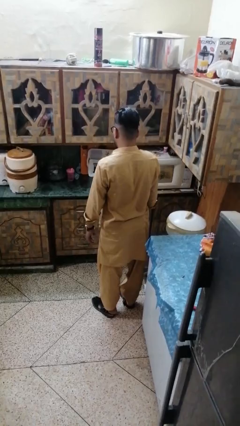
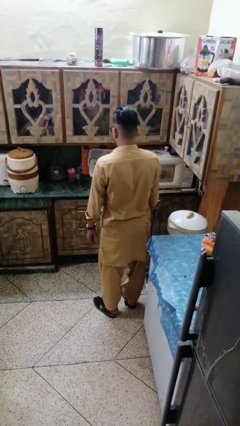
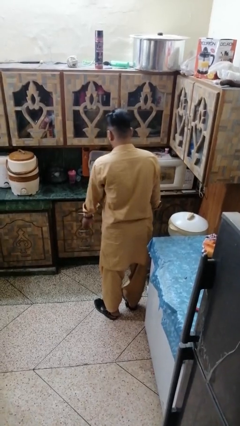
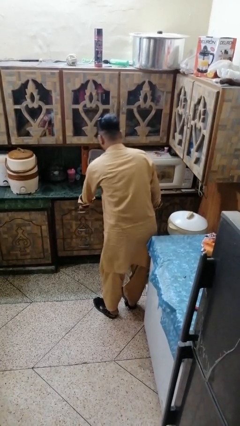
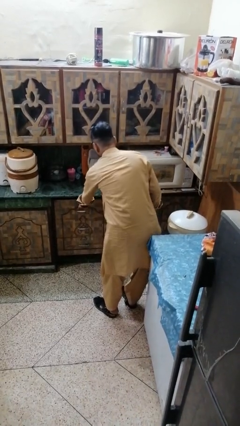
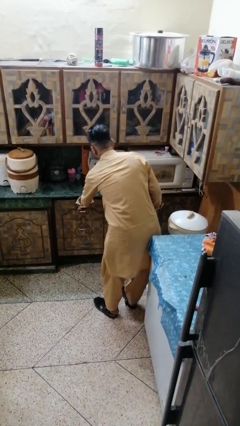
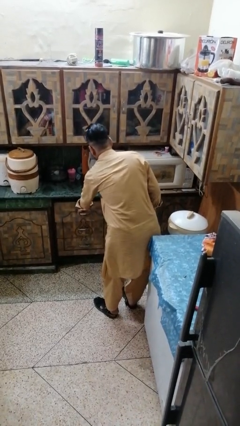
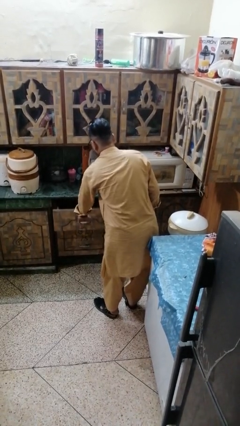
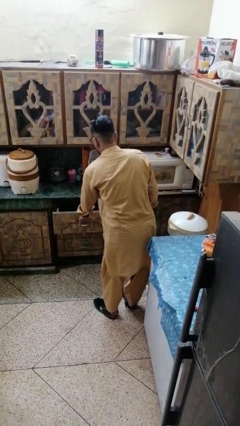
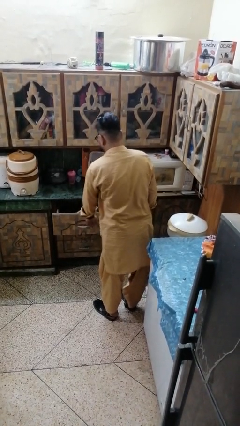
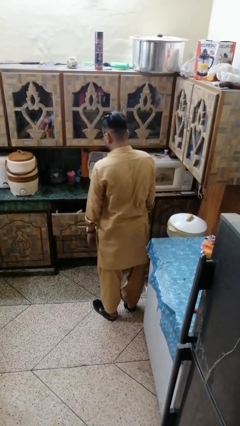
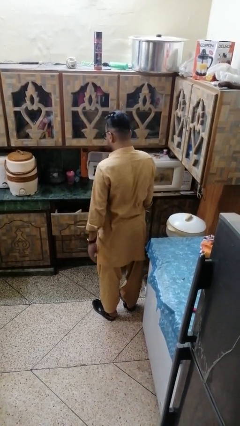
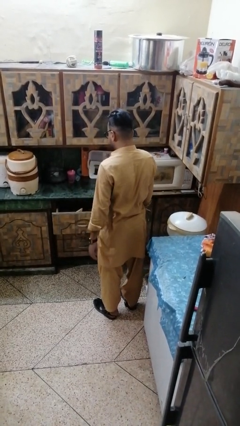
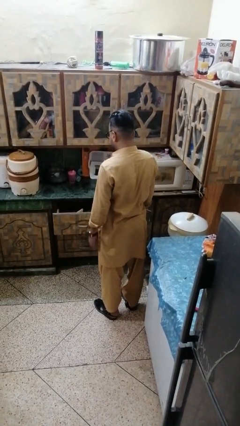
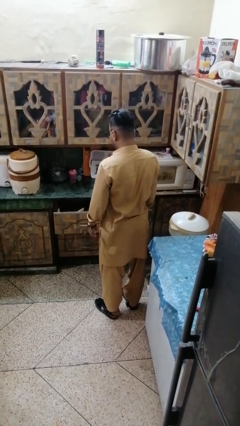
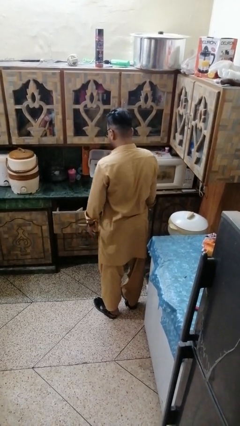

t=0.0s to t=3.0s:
person opens kitchen drawer

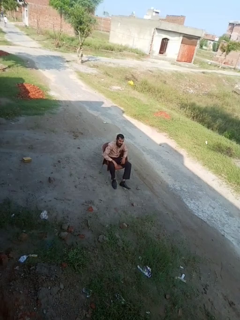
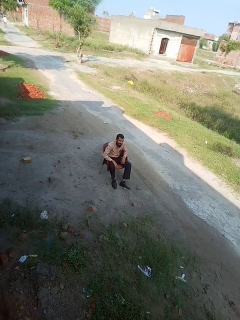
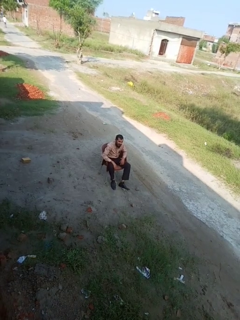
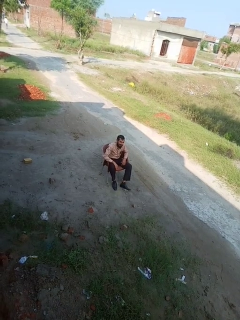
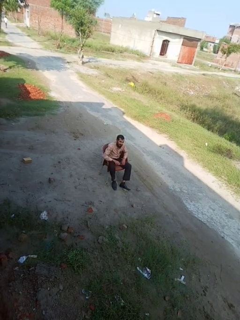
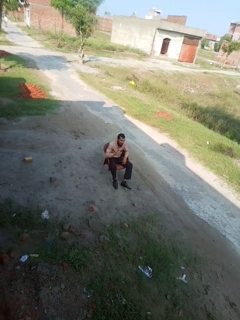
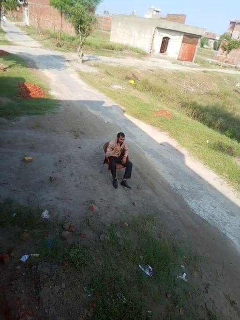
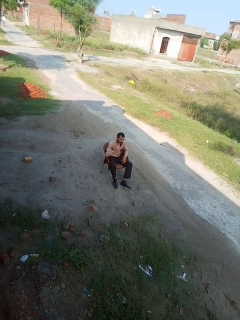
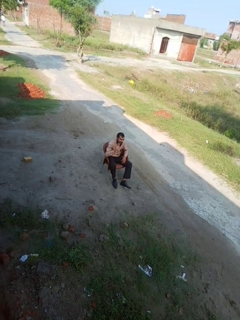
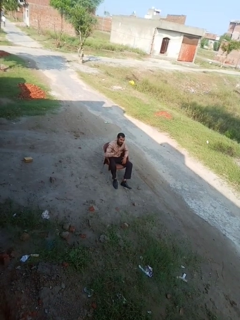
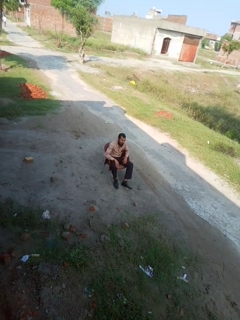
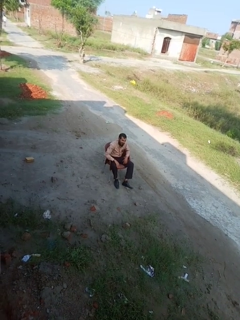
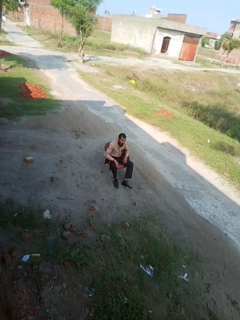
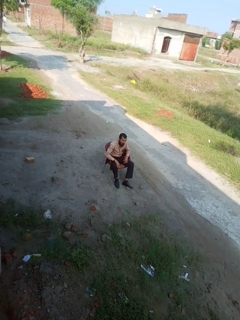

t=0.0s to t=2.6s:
person gestures number five

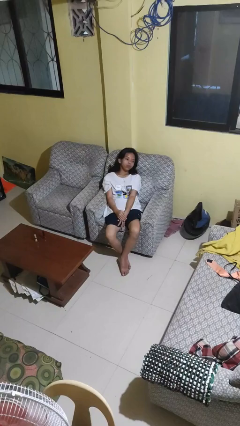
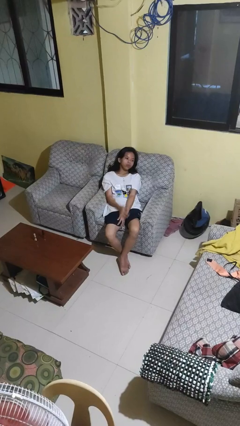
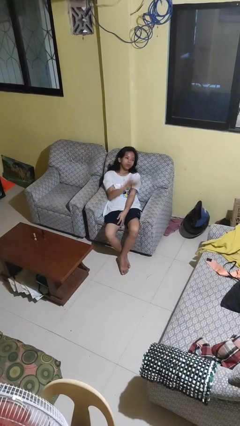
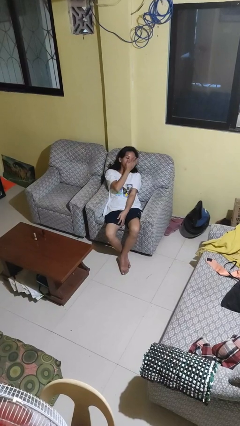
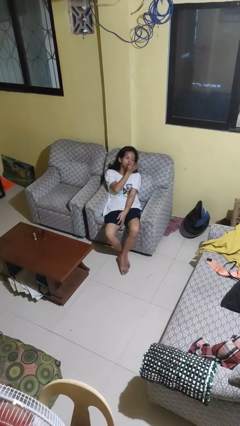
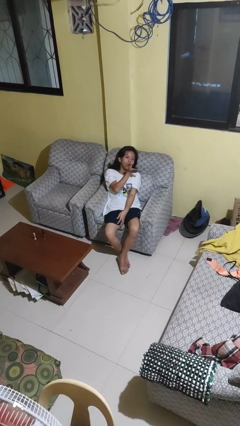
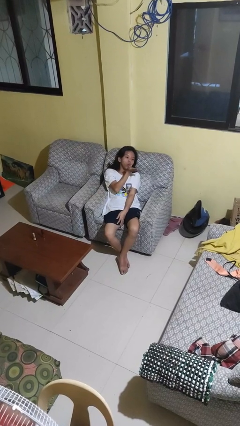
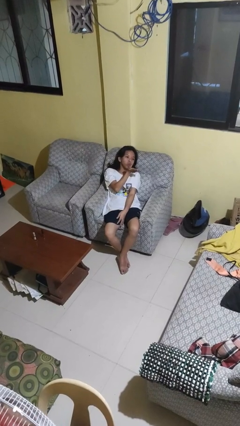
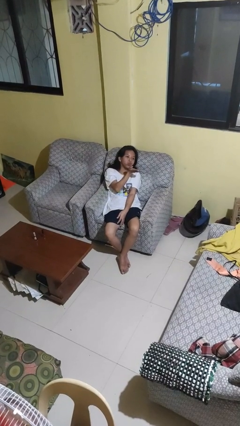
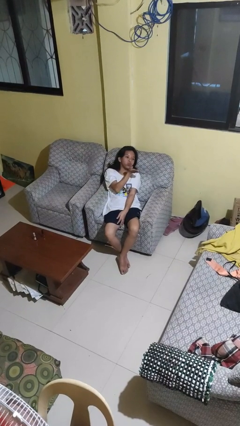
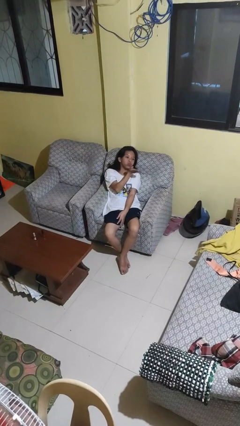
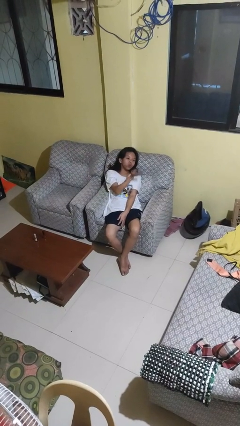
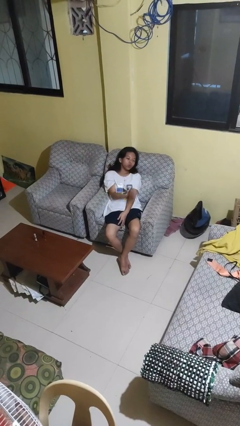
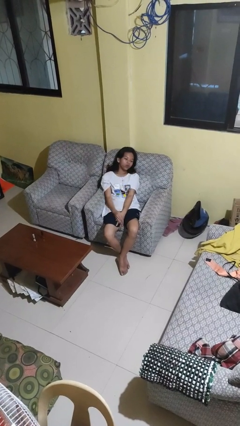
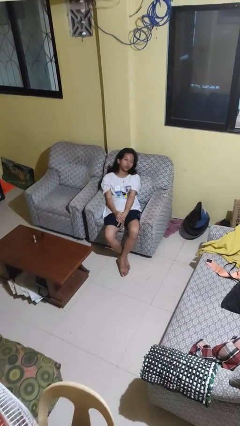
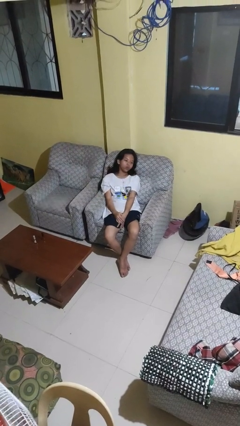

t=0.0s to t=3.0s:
person gestures blow kiss

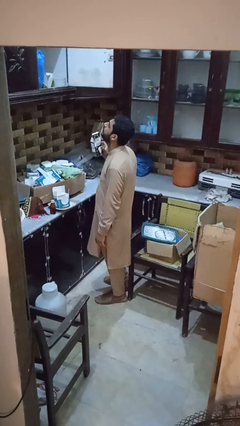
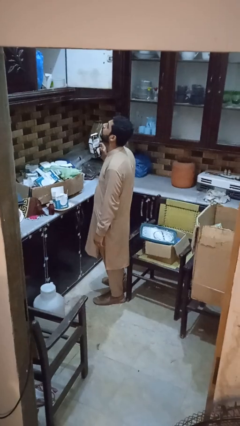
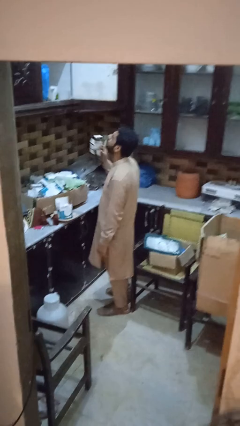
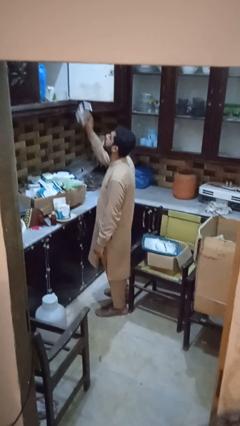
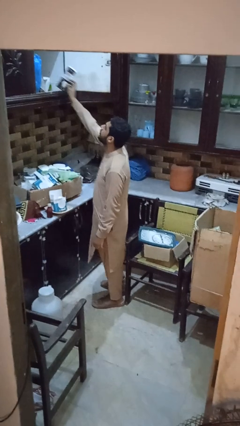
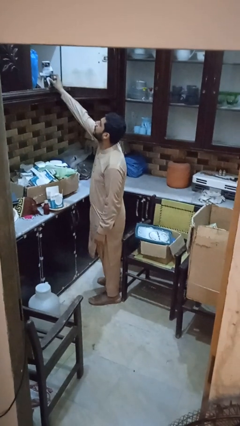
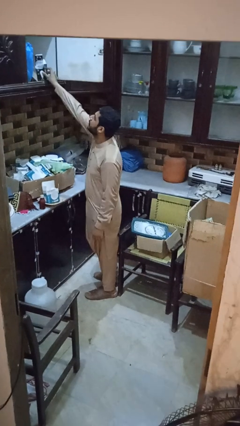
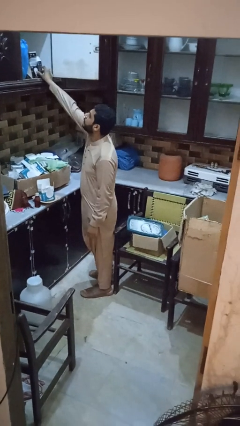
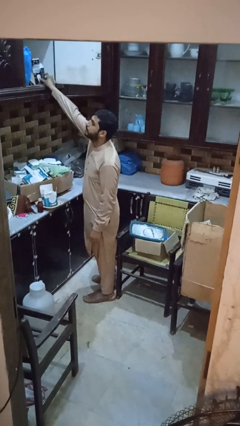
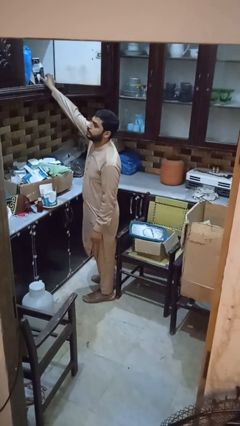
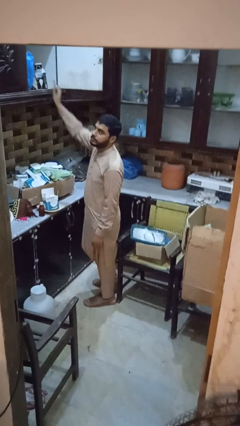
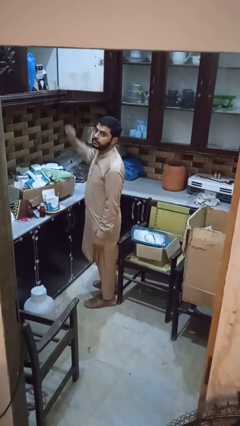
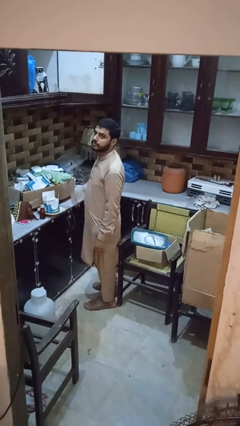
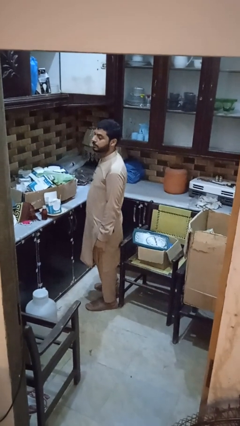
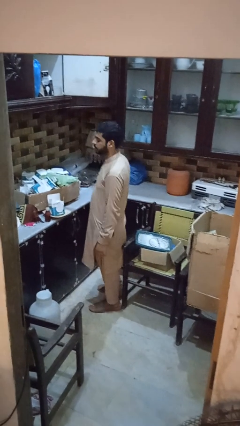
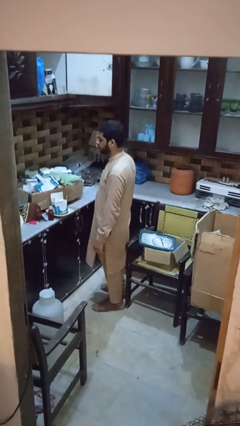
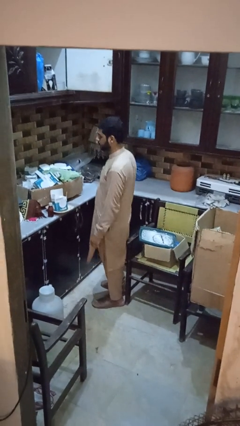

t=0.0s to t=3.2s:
person takes object from cabinet

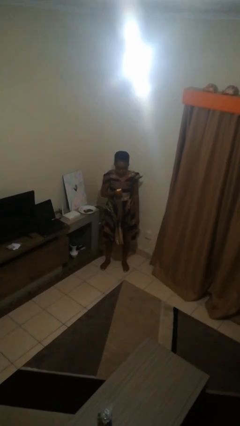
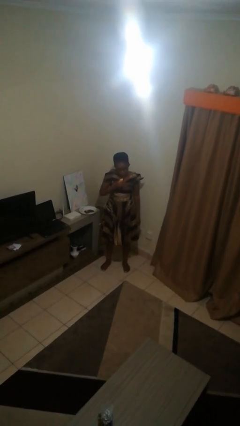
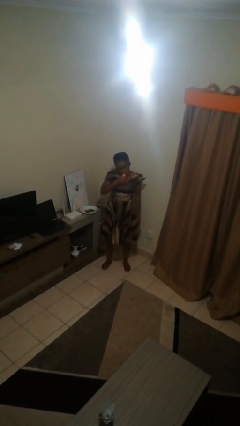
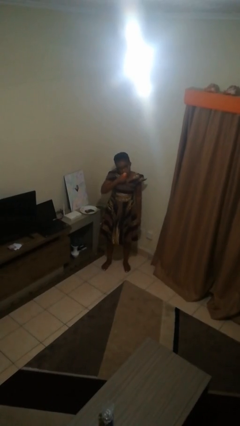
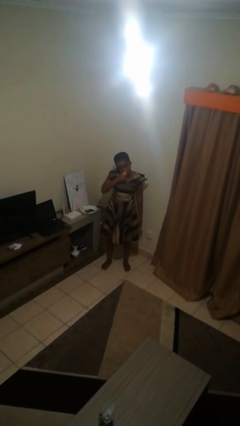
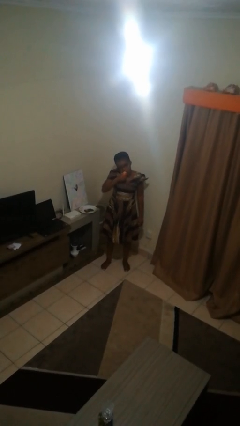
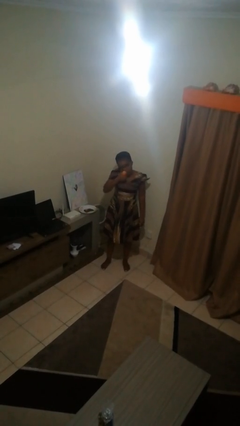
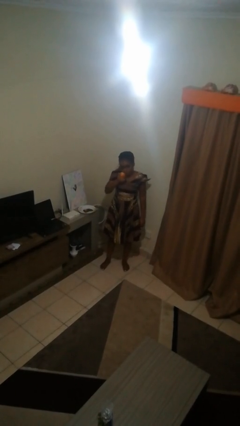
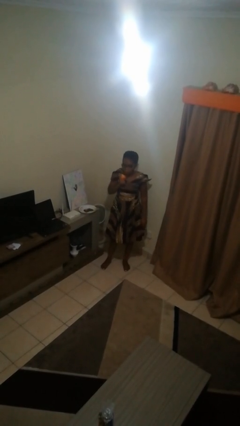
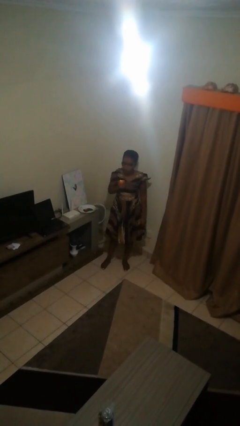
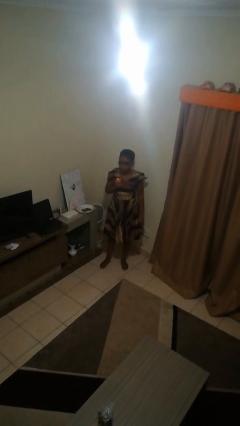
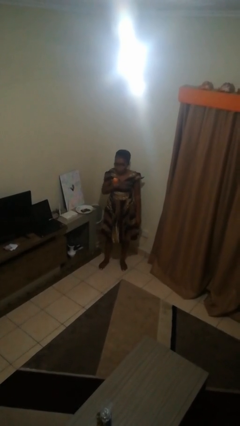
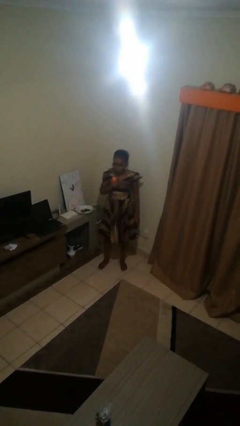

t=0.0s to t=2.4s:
person eats apple

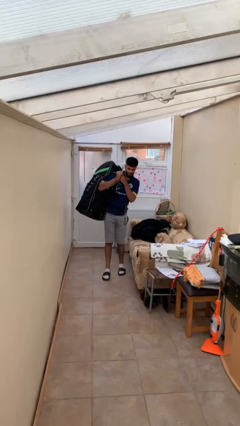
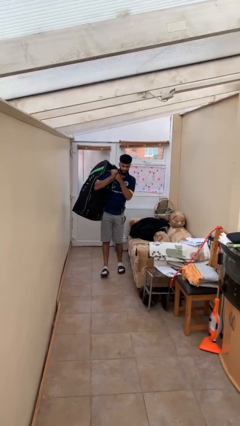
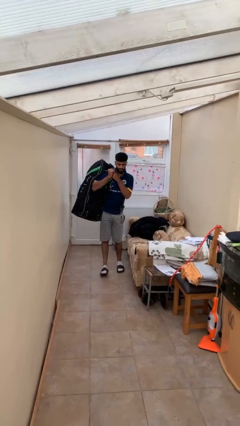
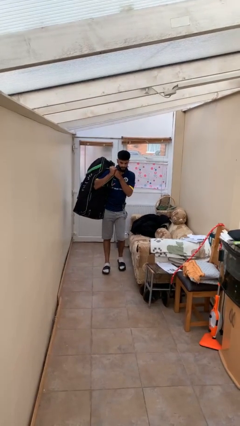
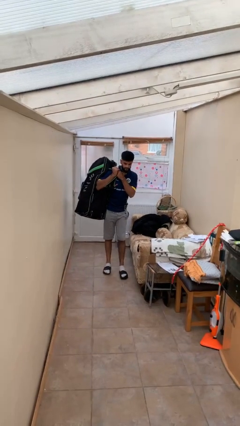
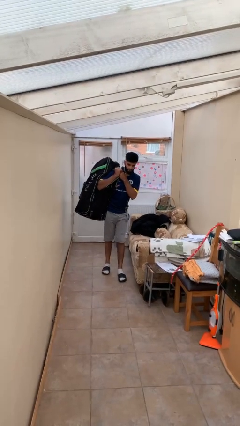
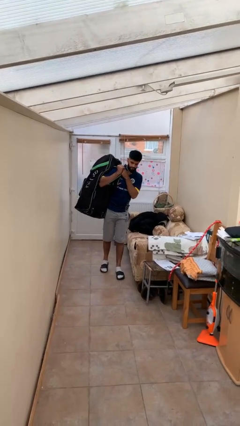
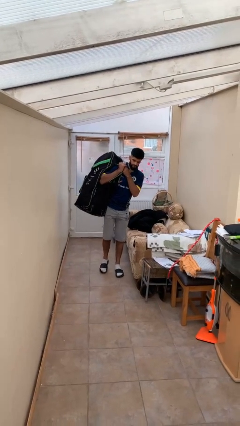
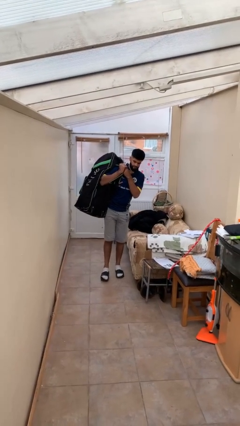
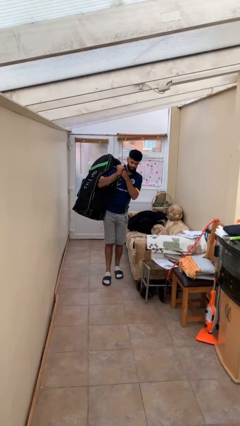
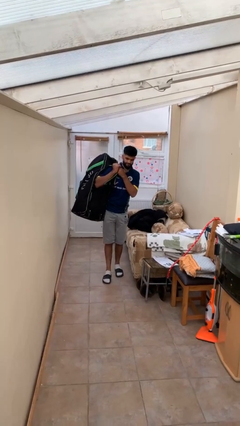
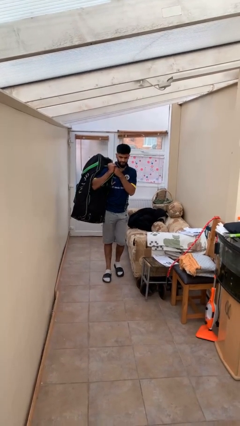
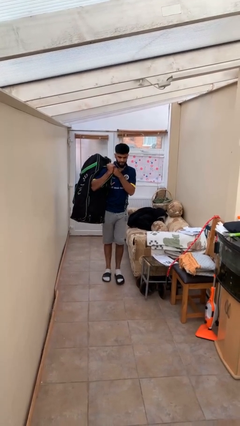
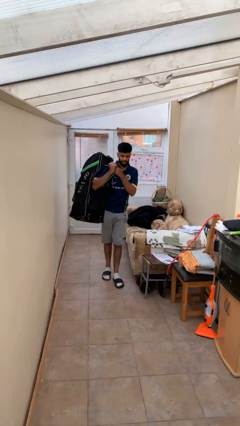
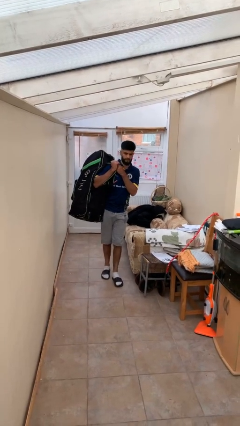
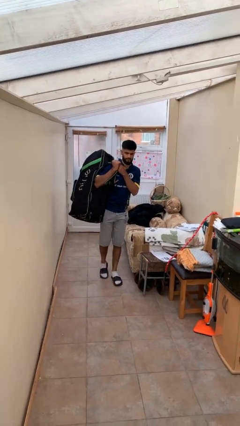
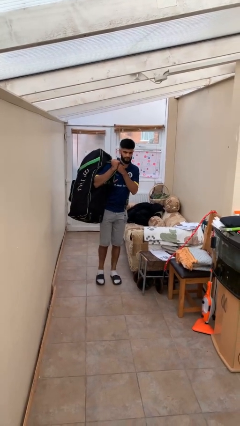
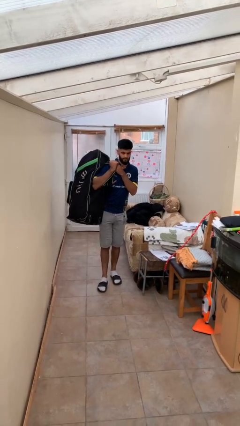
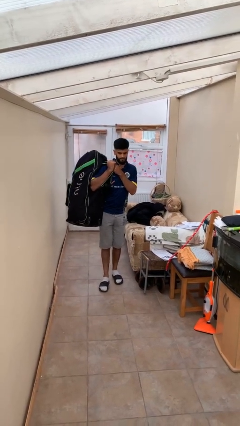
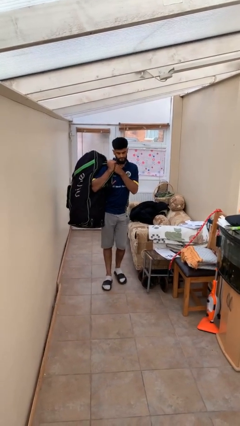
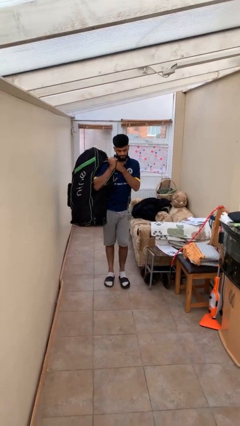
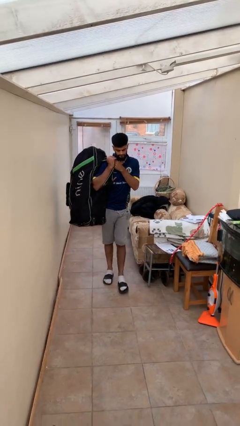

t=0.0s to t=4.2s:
person carries heavy object
